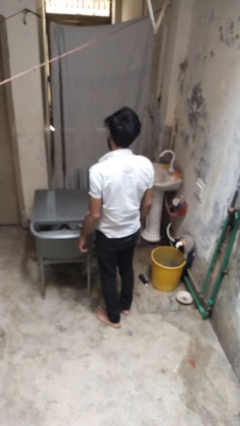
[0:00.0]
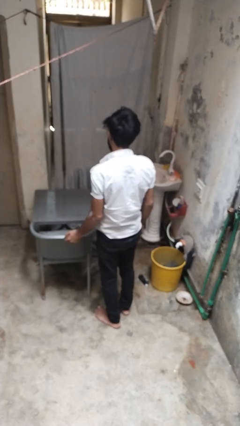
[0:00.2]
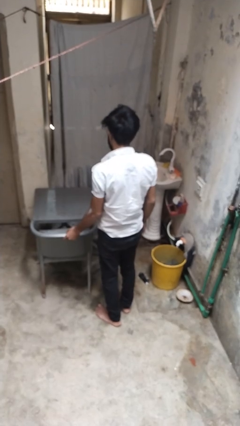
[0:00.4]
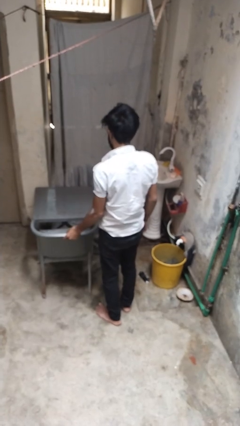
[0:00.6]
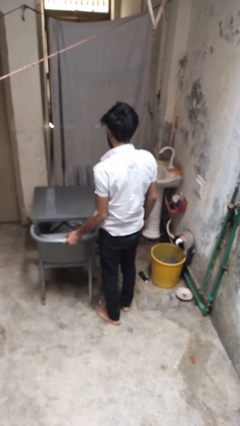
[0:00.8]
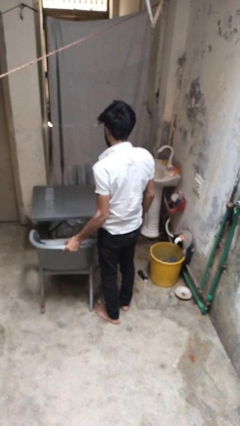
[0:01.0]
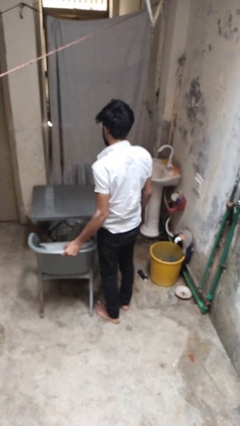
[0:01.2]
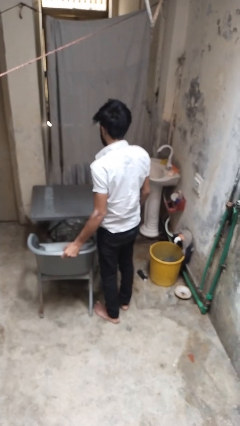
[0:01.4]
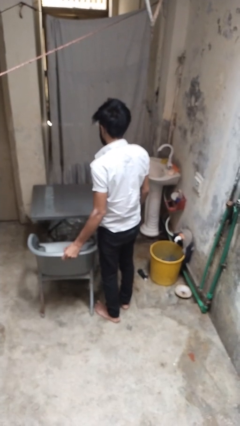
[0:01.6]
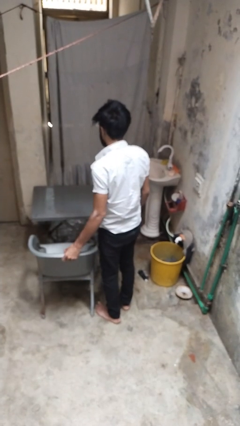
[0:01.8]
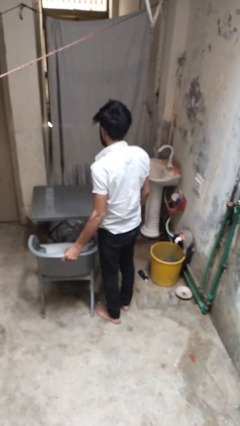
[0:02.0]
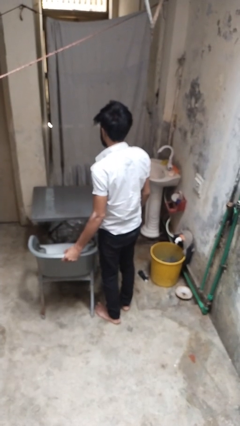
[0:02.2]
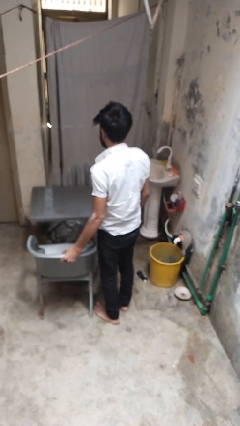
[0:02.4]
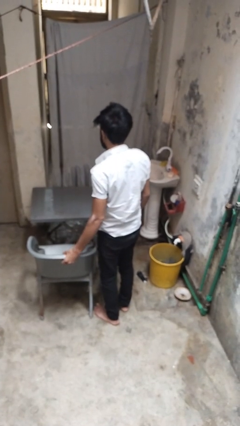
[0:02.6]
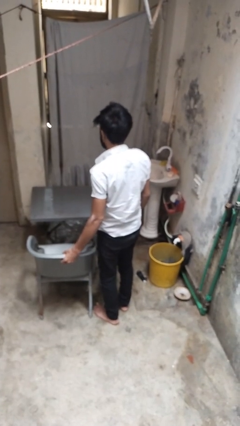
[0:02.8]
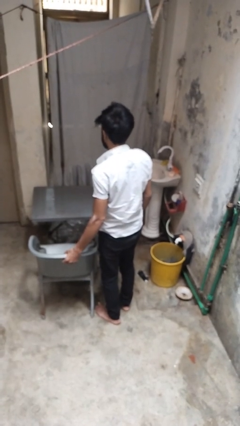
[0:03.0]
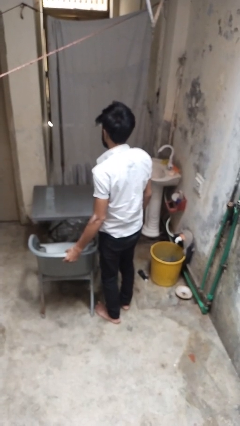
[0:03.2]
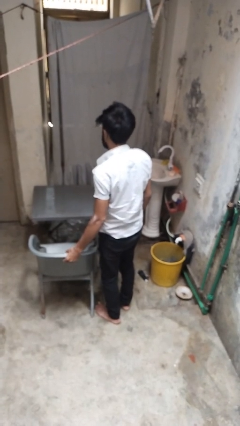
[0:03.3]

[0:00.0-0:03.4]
person pulls out chair

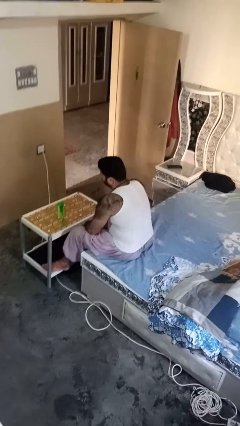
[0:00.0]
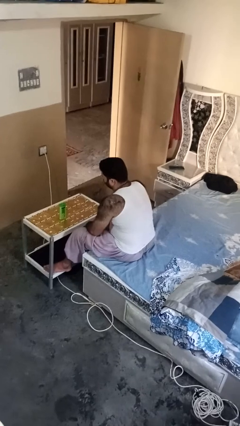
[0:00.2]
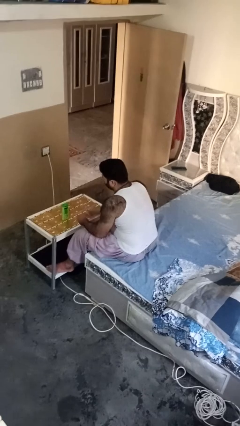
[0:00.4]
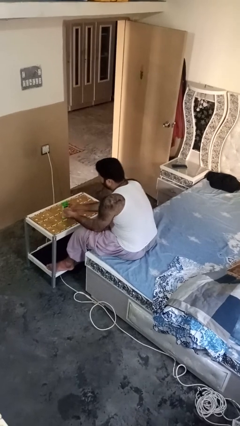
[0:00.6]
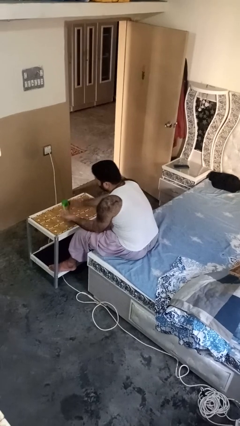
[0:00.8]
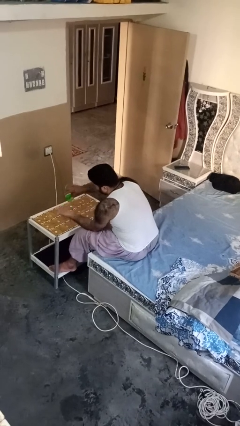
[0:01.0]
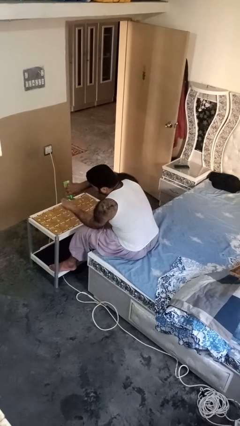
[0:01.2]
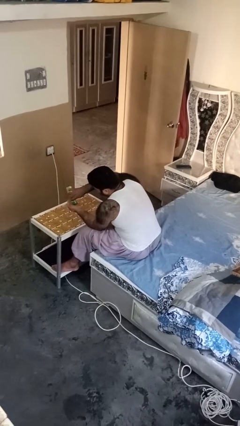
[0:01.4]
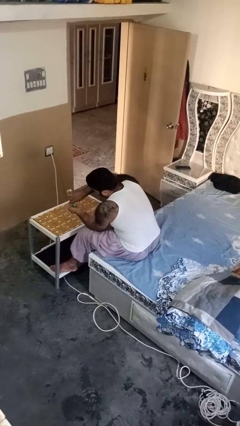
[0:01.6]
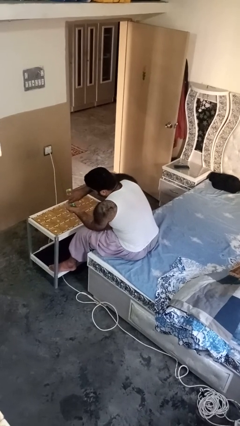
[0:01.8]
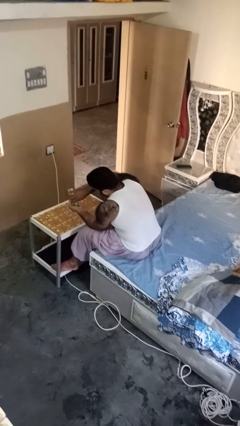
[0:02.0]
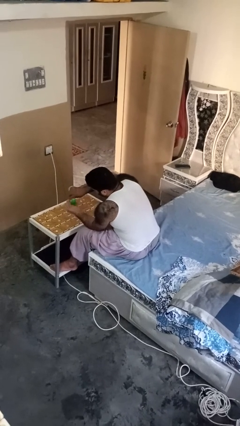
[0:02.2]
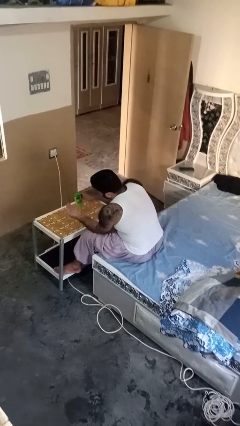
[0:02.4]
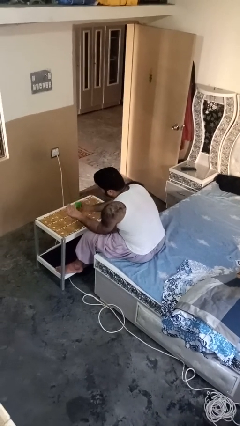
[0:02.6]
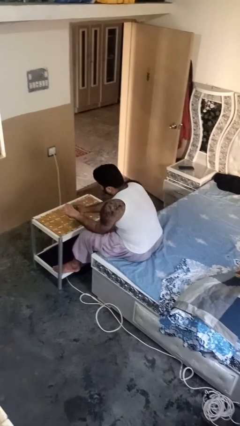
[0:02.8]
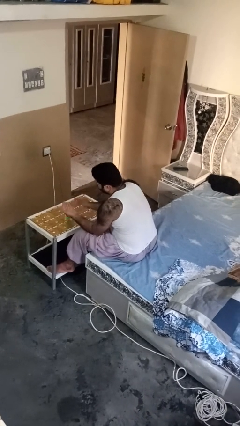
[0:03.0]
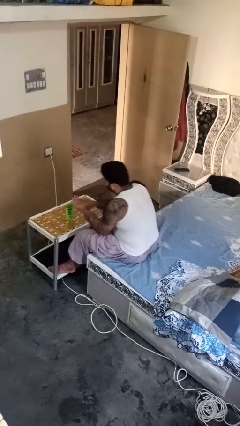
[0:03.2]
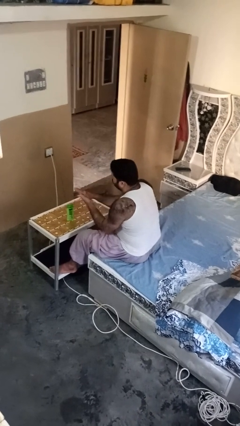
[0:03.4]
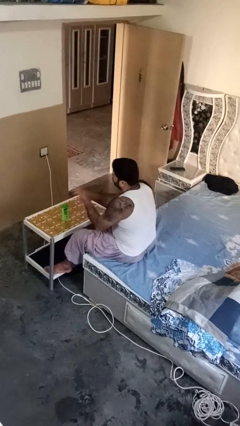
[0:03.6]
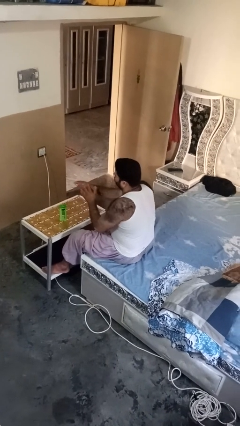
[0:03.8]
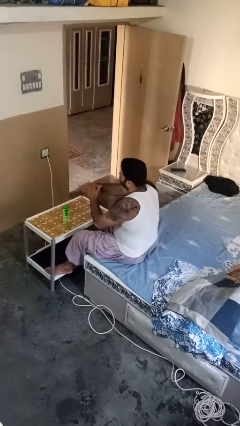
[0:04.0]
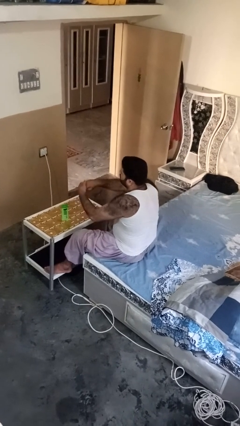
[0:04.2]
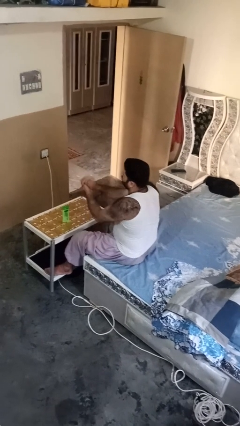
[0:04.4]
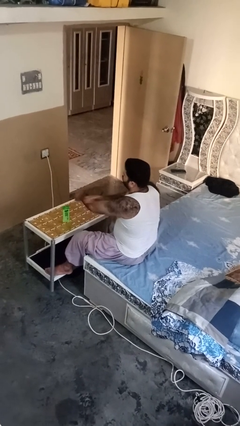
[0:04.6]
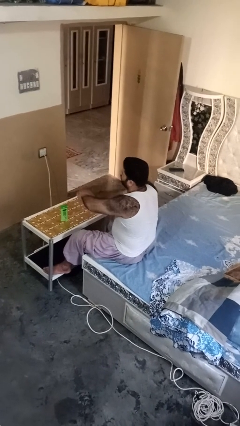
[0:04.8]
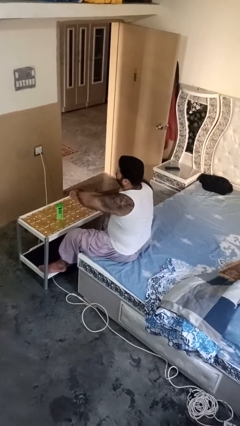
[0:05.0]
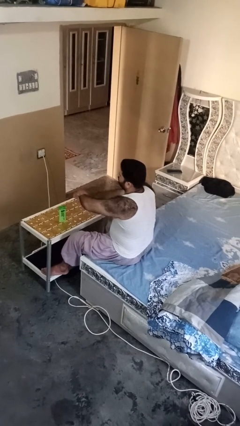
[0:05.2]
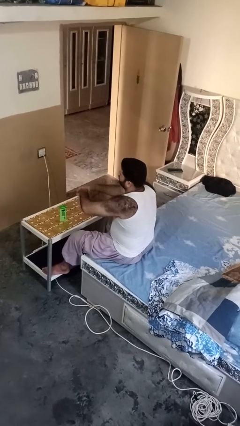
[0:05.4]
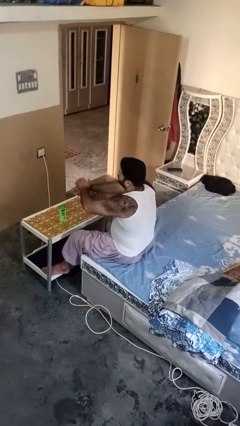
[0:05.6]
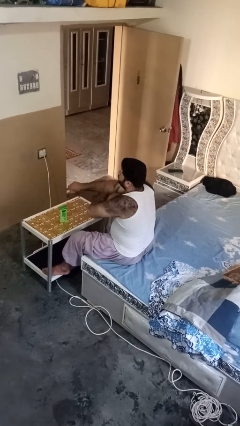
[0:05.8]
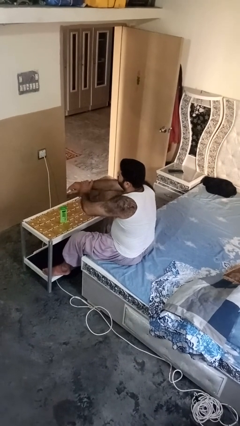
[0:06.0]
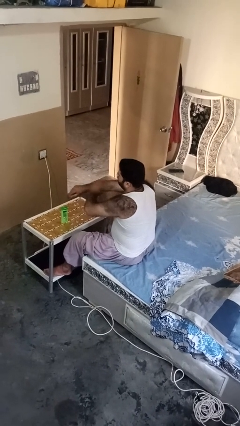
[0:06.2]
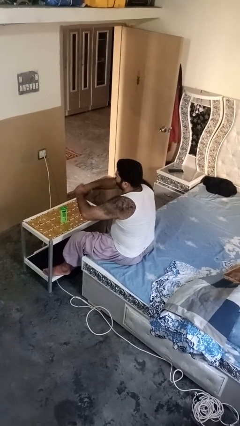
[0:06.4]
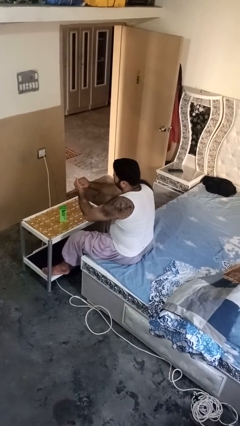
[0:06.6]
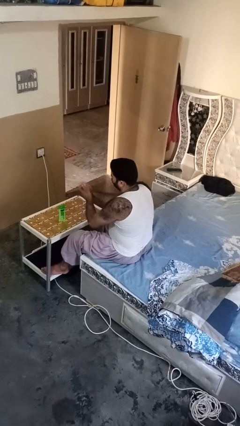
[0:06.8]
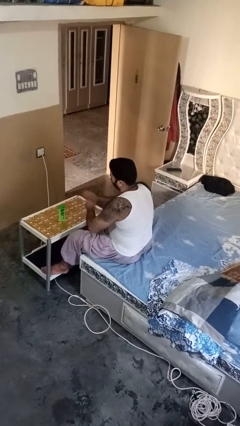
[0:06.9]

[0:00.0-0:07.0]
person applies sunscreen

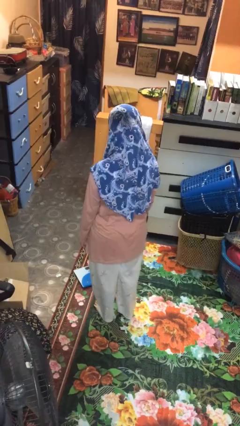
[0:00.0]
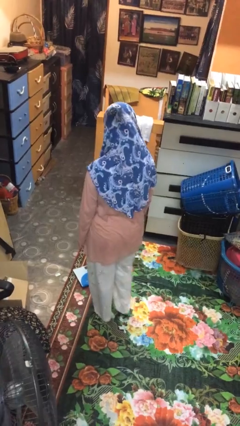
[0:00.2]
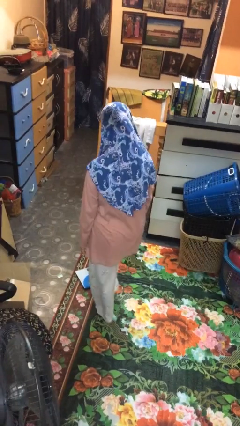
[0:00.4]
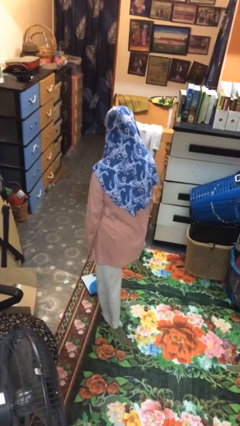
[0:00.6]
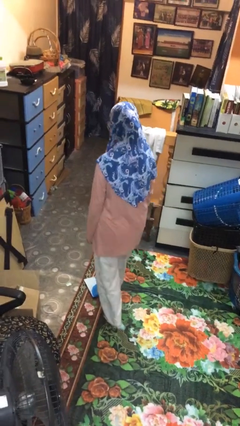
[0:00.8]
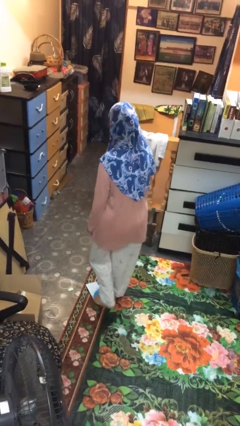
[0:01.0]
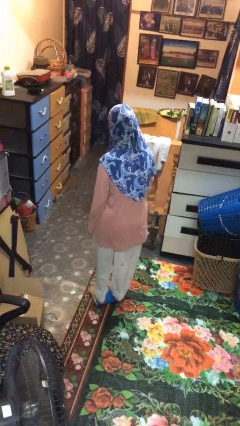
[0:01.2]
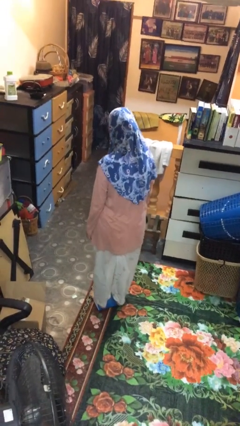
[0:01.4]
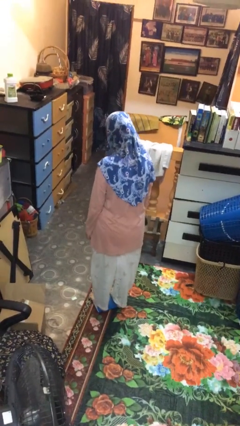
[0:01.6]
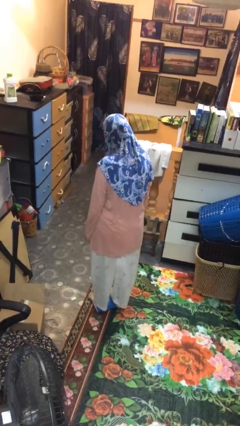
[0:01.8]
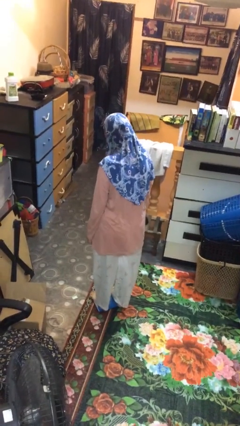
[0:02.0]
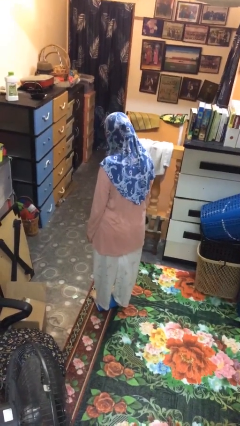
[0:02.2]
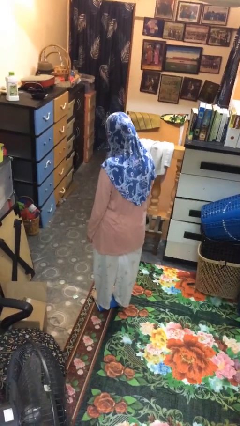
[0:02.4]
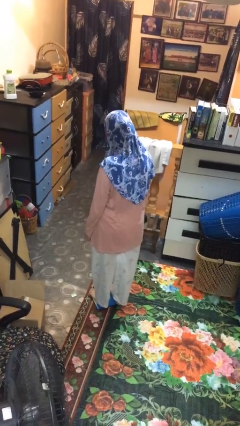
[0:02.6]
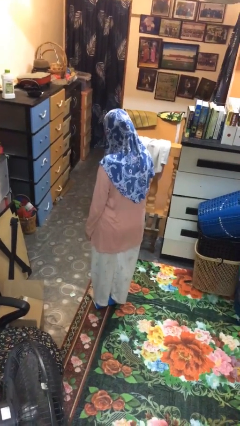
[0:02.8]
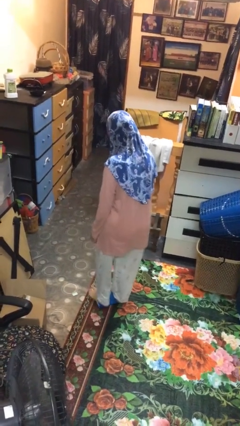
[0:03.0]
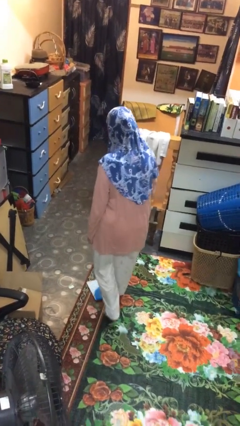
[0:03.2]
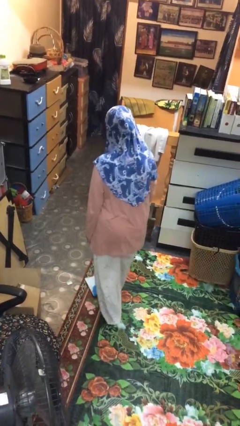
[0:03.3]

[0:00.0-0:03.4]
person uses bodyweight scale

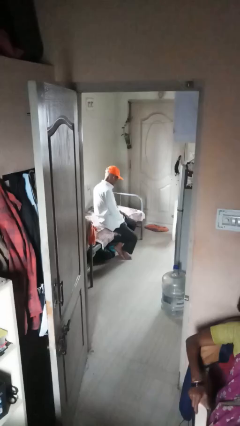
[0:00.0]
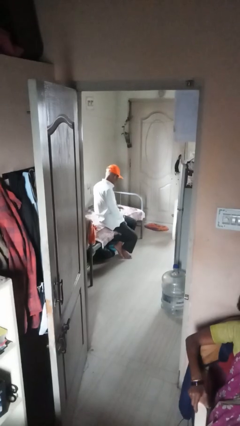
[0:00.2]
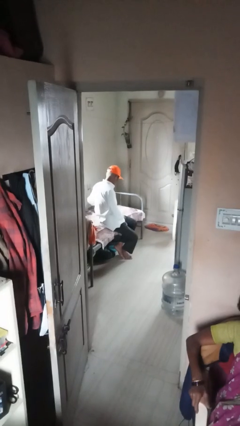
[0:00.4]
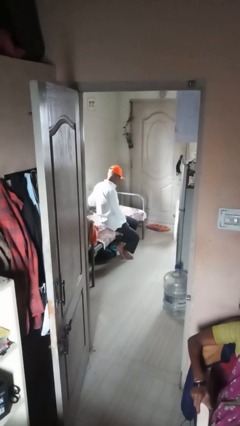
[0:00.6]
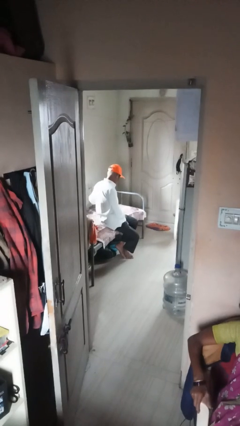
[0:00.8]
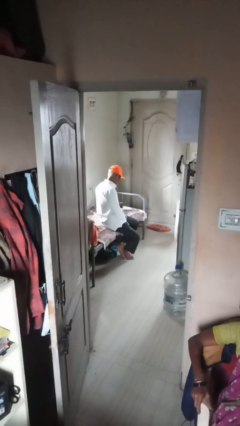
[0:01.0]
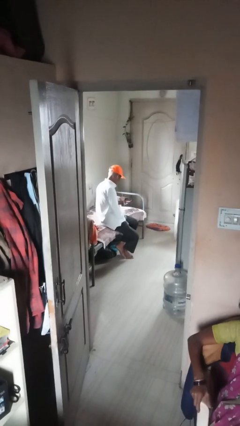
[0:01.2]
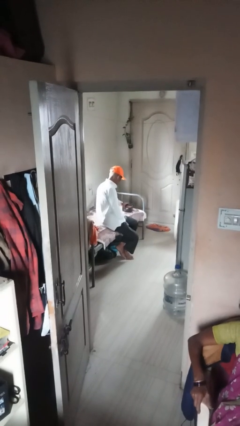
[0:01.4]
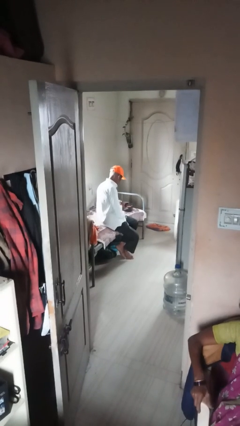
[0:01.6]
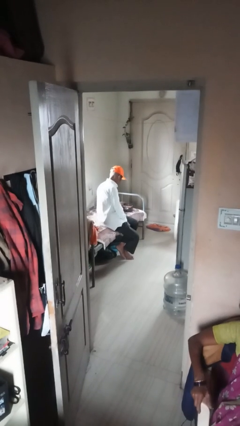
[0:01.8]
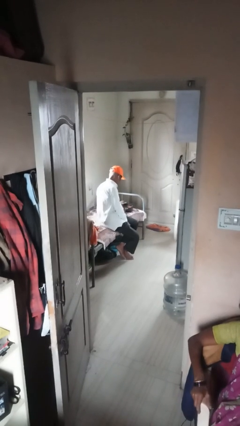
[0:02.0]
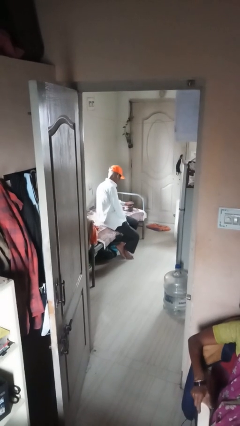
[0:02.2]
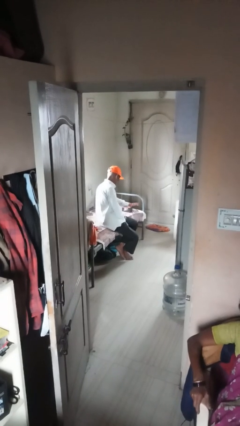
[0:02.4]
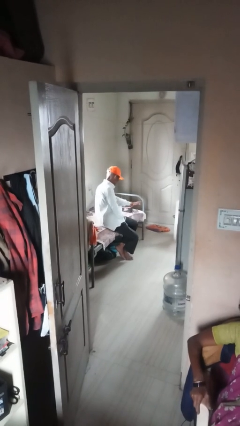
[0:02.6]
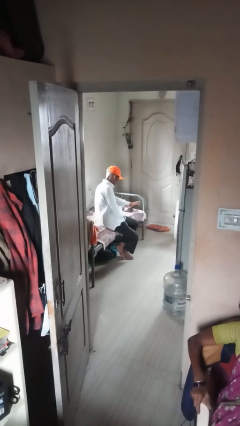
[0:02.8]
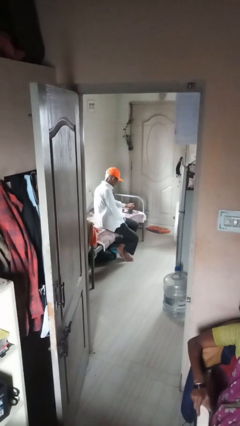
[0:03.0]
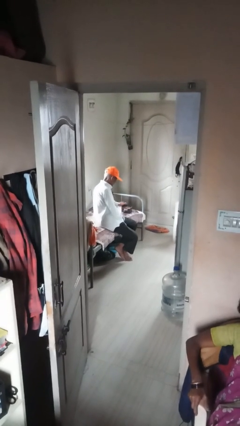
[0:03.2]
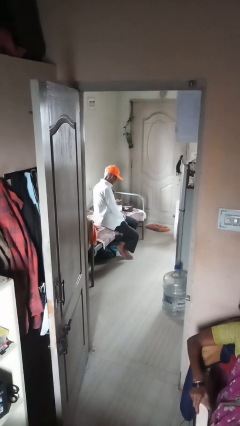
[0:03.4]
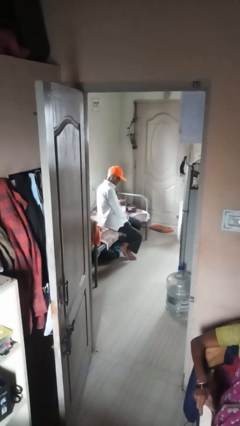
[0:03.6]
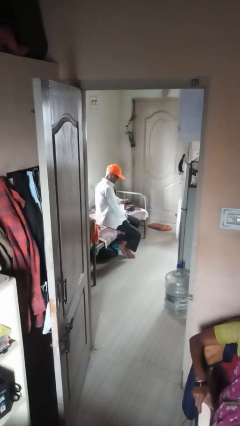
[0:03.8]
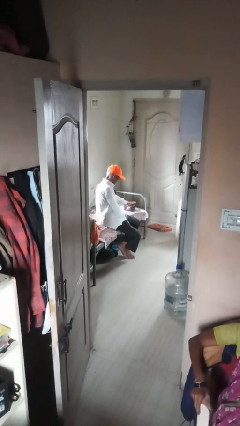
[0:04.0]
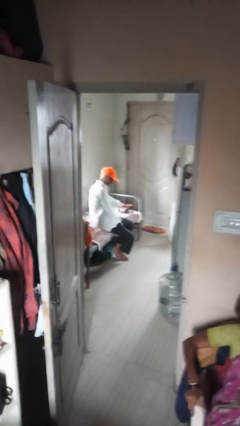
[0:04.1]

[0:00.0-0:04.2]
person waves hand over object
